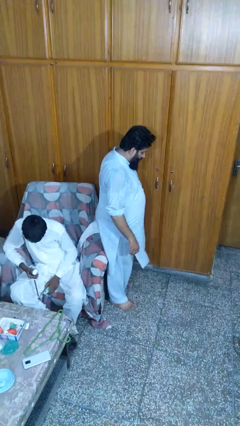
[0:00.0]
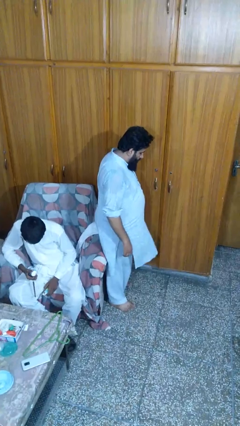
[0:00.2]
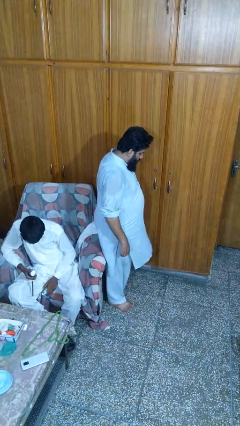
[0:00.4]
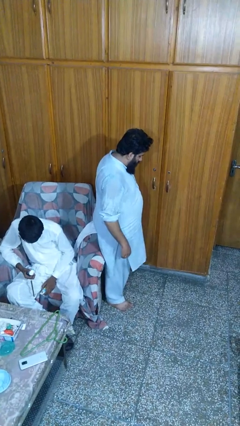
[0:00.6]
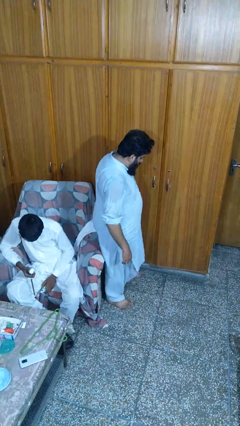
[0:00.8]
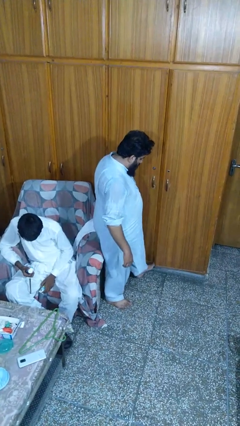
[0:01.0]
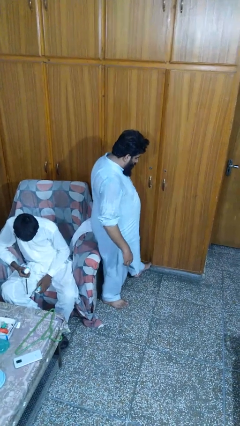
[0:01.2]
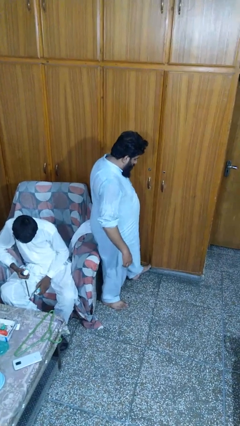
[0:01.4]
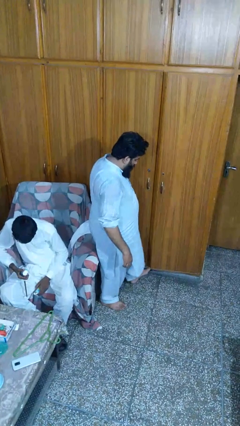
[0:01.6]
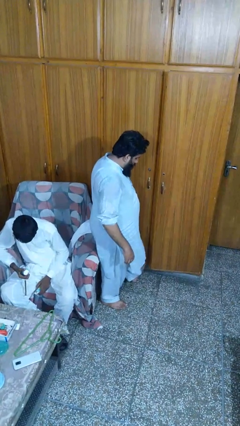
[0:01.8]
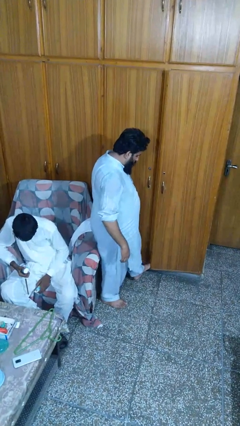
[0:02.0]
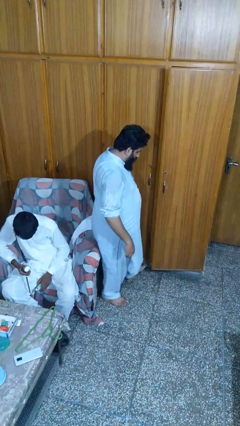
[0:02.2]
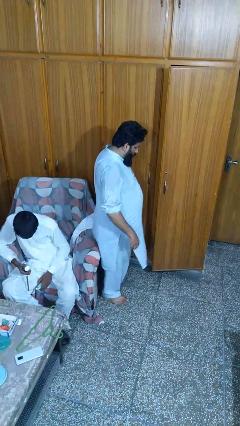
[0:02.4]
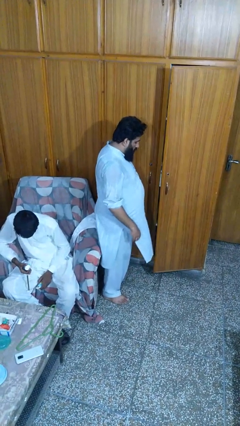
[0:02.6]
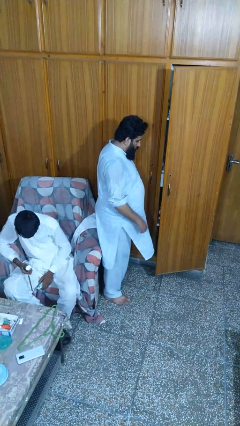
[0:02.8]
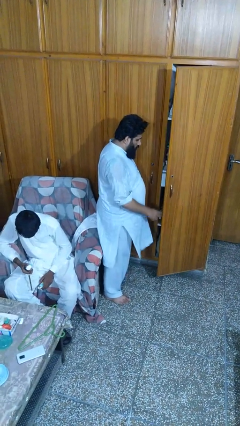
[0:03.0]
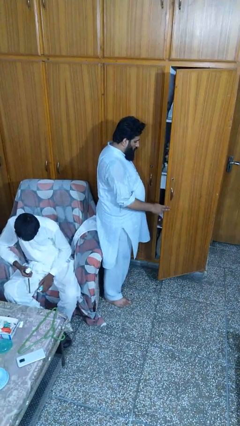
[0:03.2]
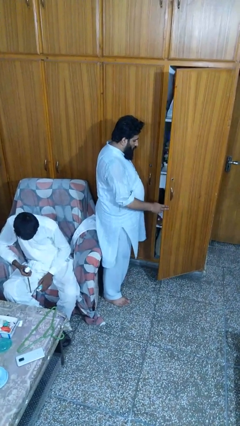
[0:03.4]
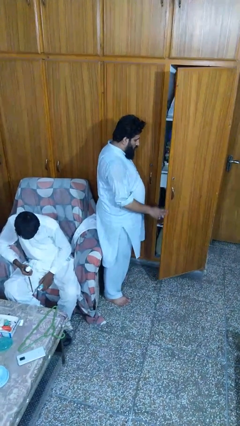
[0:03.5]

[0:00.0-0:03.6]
person opens facility door

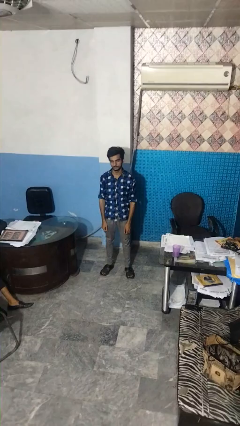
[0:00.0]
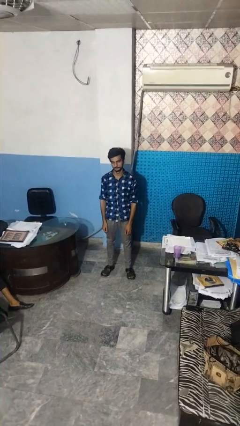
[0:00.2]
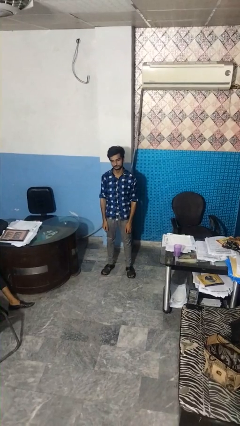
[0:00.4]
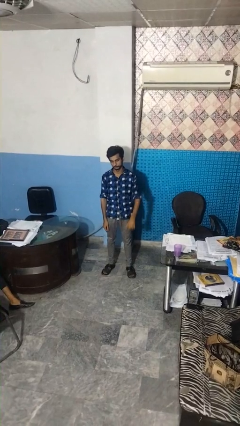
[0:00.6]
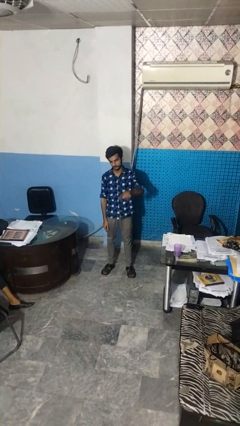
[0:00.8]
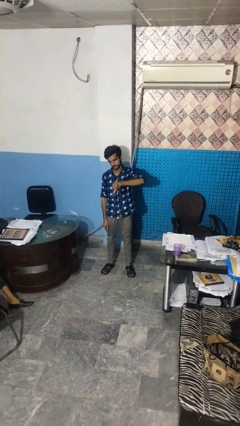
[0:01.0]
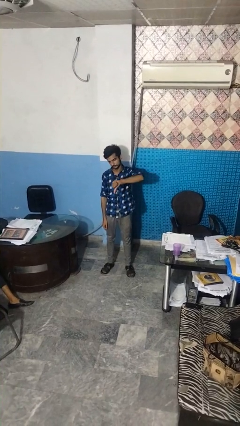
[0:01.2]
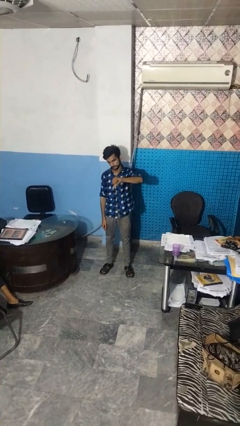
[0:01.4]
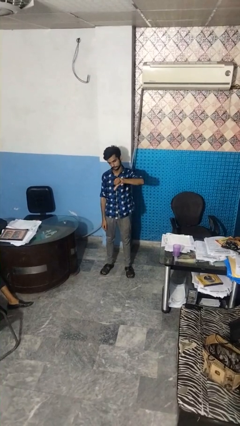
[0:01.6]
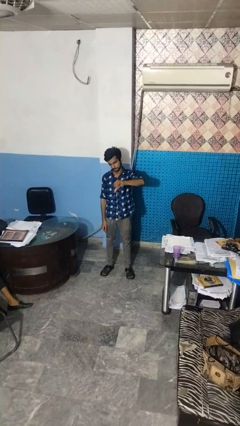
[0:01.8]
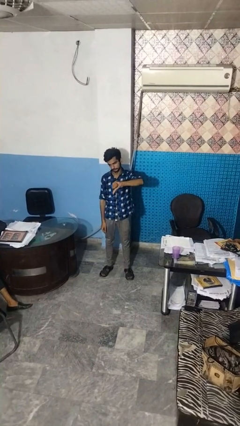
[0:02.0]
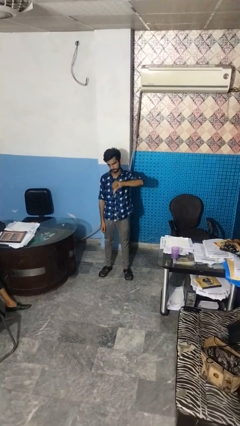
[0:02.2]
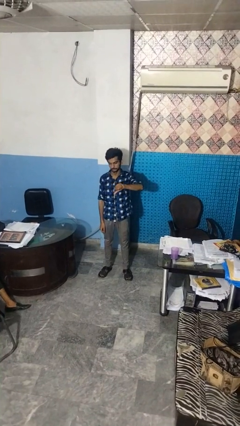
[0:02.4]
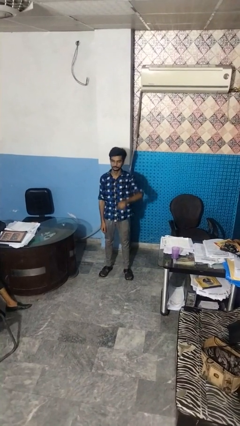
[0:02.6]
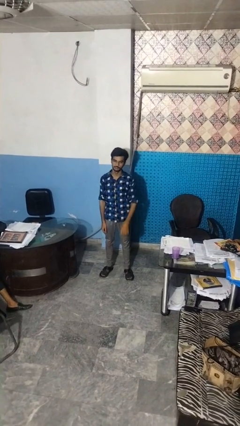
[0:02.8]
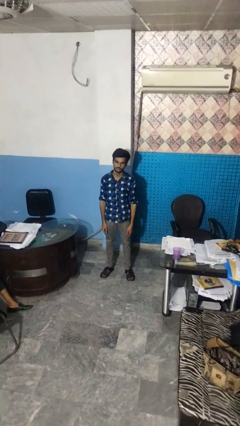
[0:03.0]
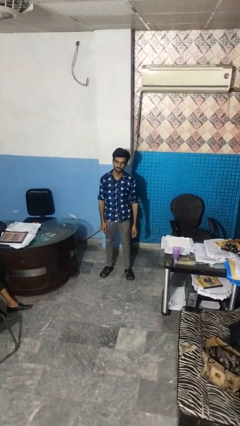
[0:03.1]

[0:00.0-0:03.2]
person gestures thumbs down

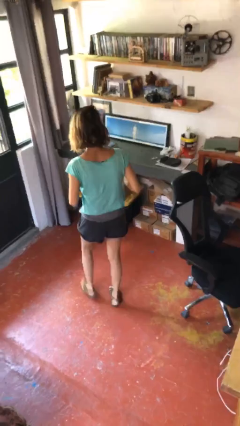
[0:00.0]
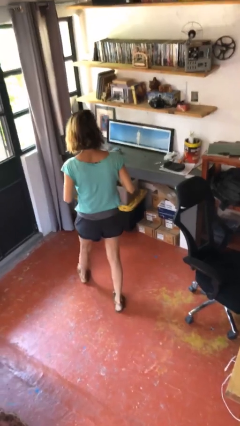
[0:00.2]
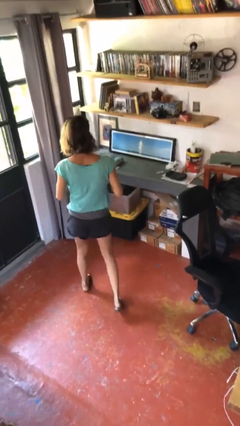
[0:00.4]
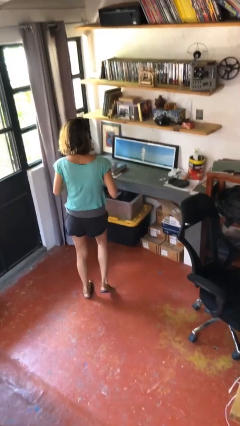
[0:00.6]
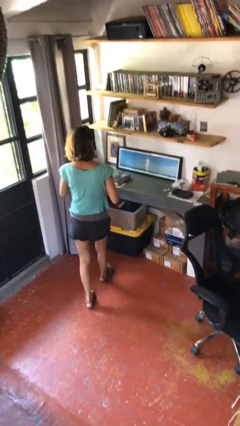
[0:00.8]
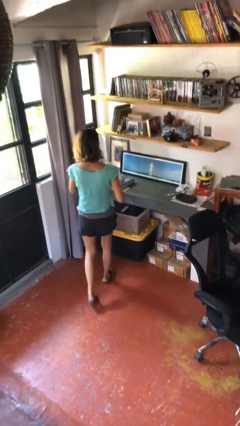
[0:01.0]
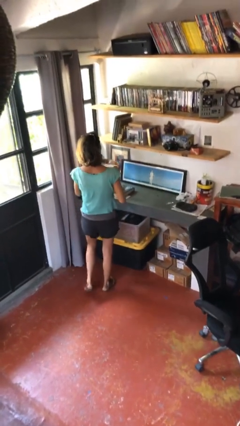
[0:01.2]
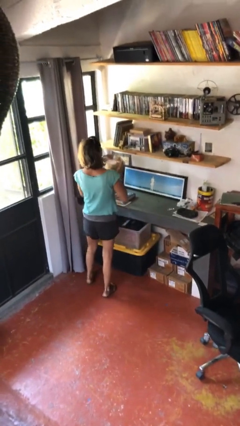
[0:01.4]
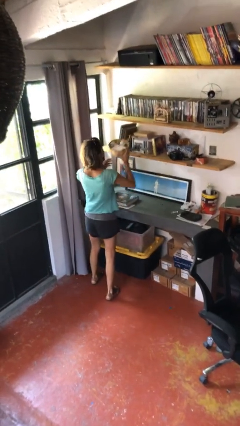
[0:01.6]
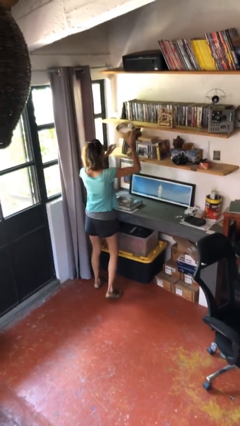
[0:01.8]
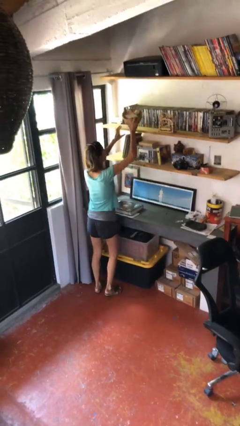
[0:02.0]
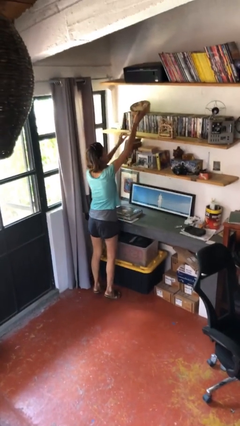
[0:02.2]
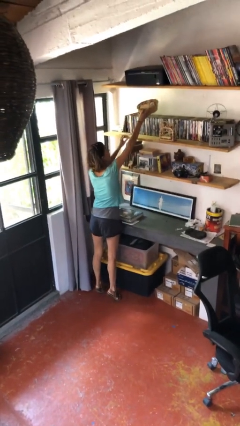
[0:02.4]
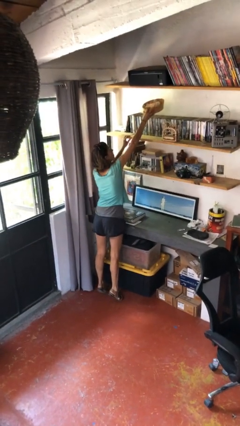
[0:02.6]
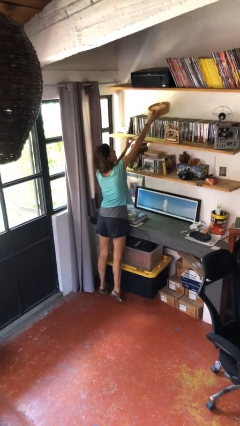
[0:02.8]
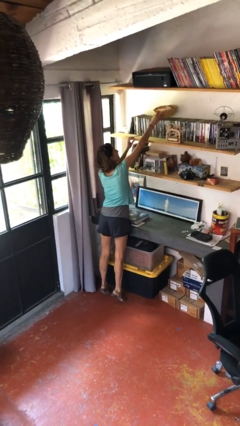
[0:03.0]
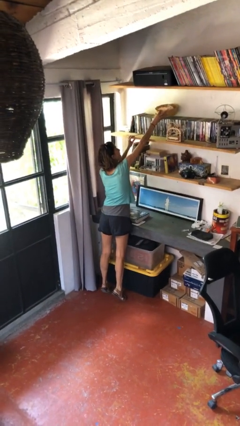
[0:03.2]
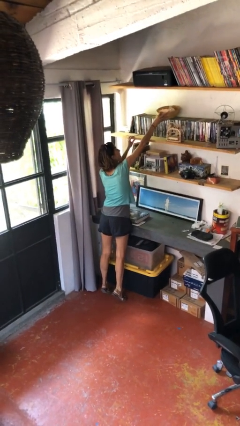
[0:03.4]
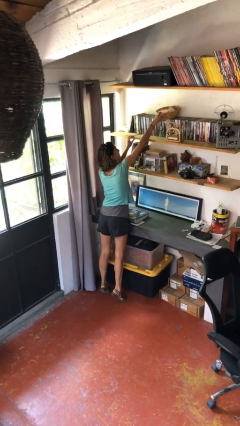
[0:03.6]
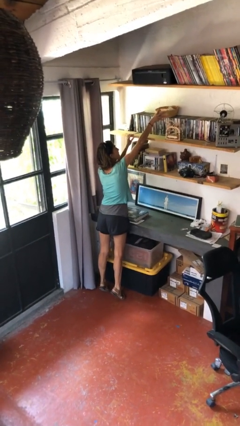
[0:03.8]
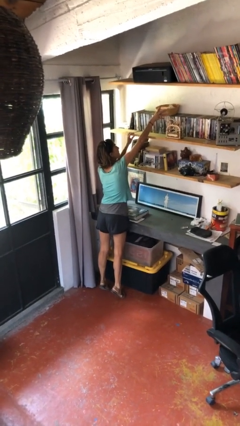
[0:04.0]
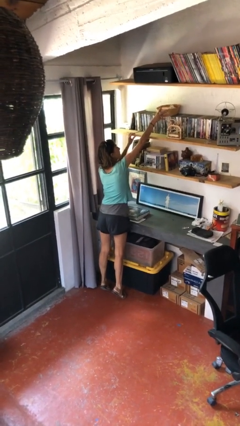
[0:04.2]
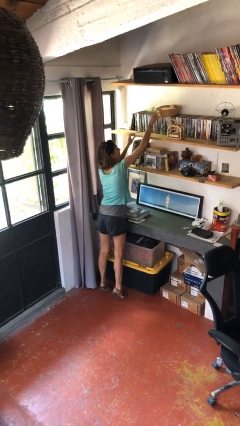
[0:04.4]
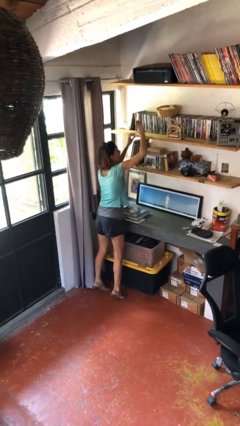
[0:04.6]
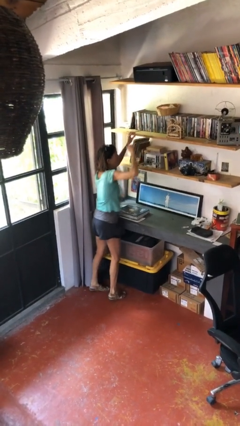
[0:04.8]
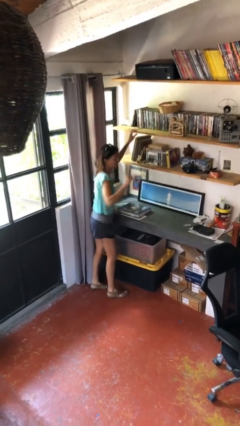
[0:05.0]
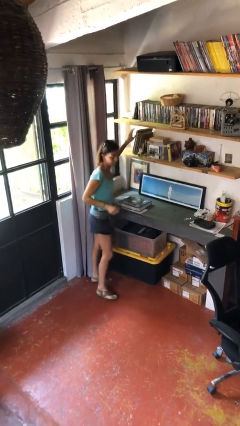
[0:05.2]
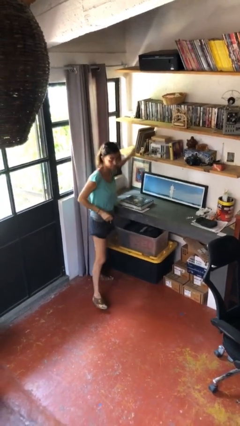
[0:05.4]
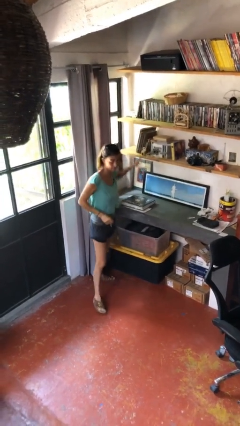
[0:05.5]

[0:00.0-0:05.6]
person puts down object on shelf

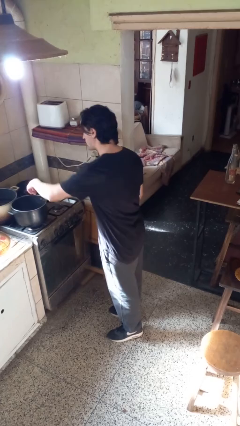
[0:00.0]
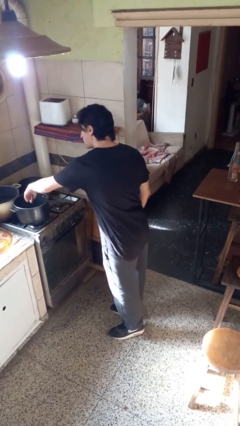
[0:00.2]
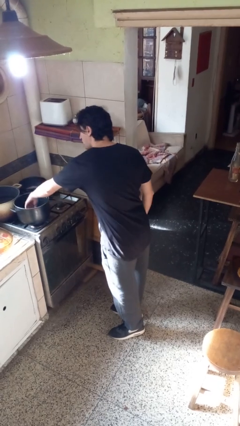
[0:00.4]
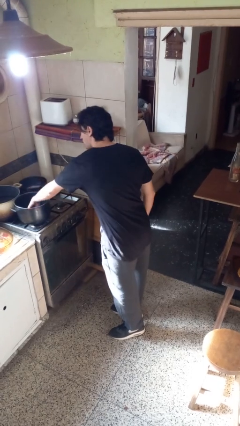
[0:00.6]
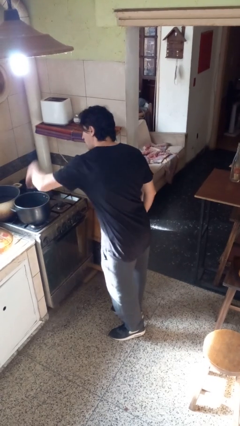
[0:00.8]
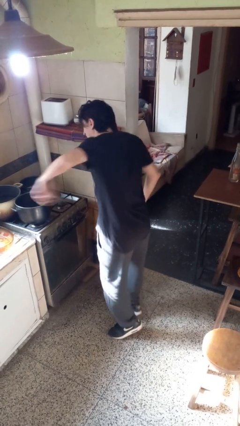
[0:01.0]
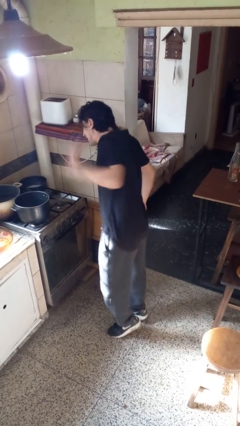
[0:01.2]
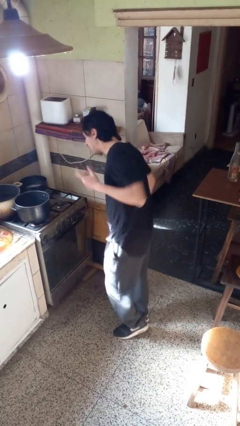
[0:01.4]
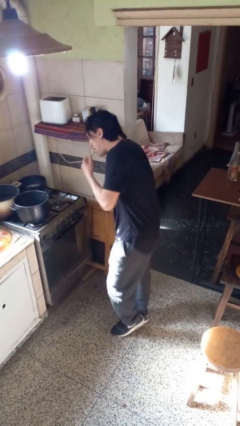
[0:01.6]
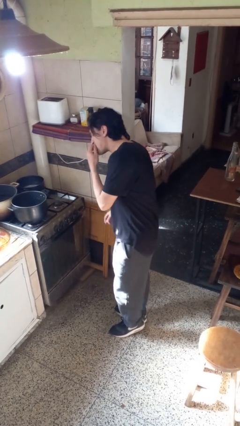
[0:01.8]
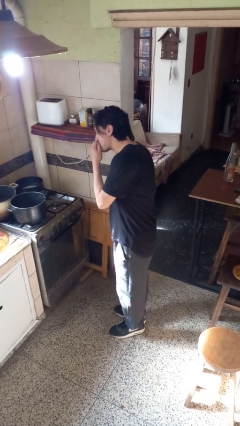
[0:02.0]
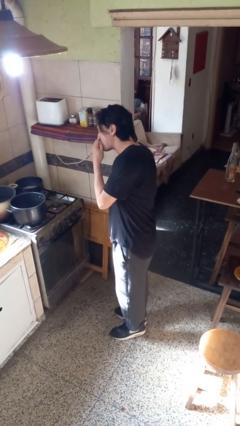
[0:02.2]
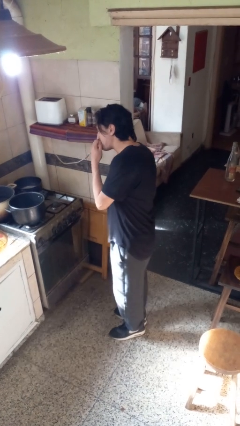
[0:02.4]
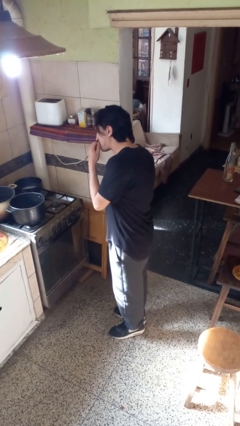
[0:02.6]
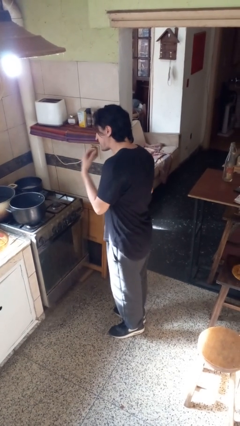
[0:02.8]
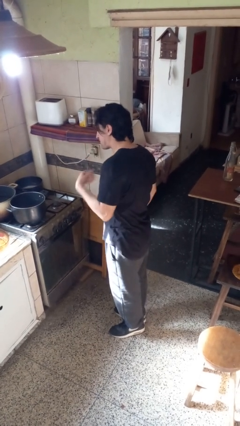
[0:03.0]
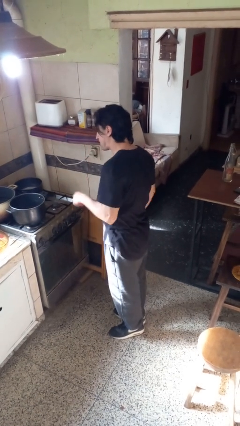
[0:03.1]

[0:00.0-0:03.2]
person burns hand

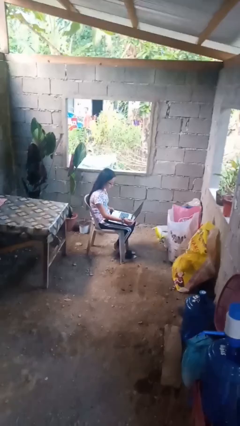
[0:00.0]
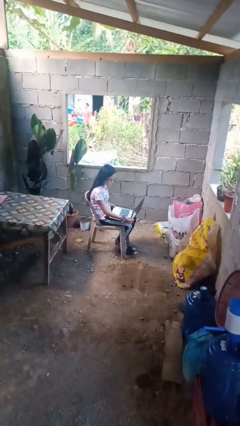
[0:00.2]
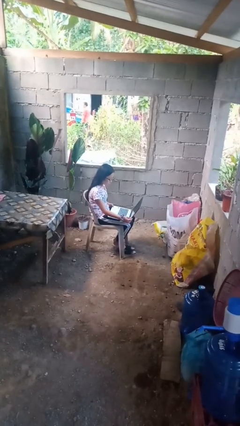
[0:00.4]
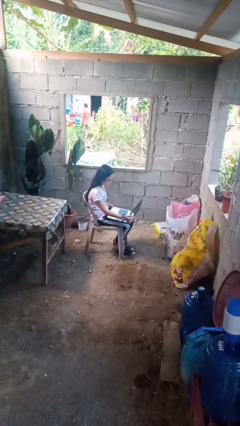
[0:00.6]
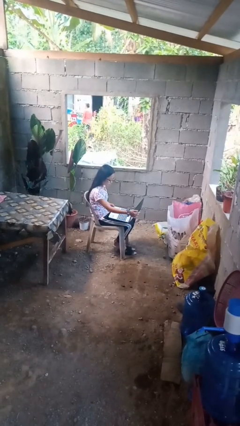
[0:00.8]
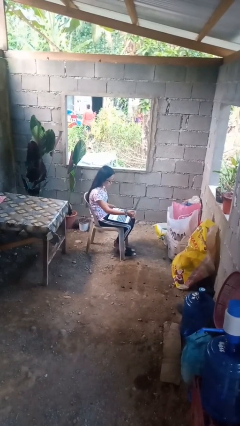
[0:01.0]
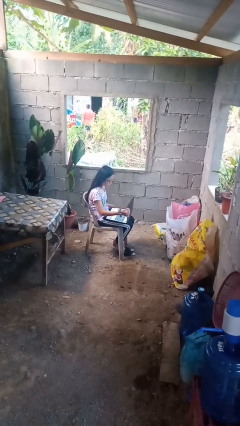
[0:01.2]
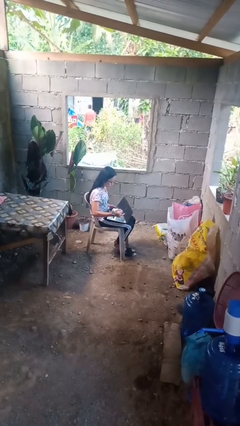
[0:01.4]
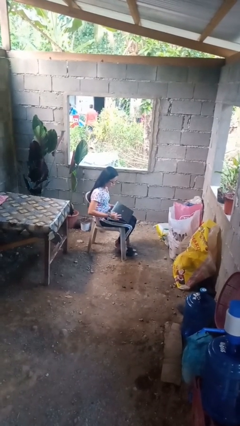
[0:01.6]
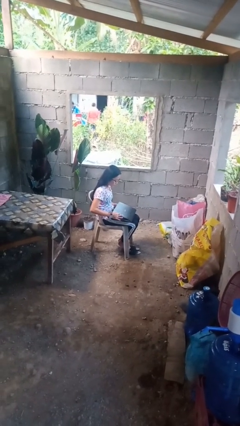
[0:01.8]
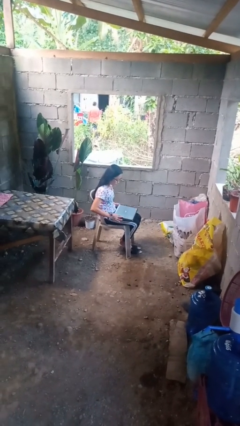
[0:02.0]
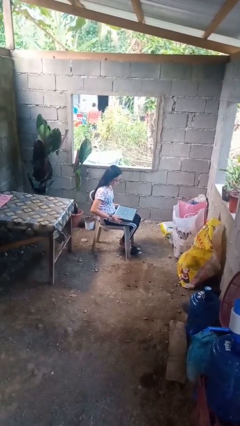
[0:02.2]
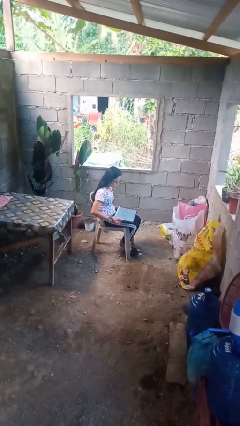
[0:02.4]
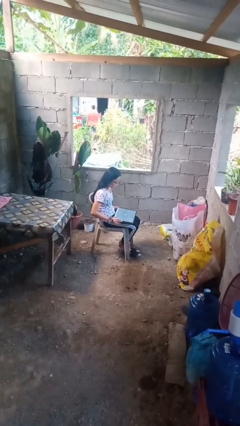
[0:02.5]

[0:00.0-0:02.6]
person closes laptop
